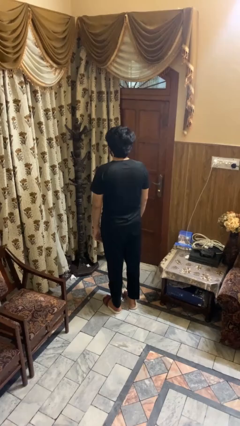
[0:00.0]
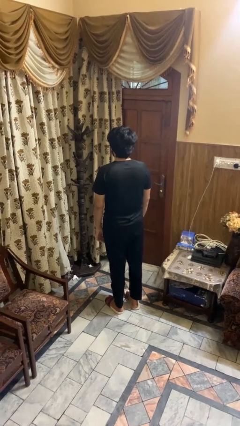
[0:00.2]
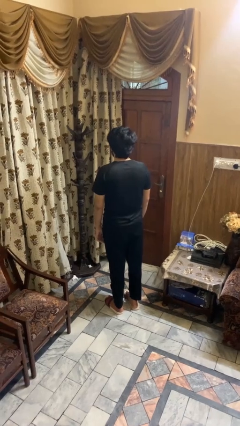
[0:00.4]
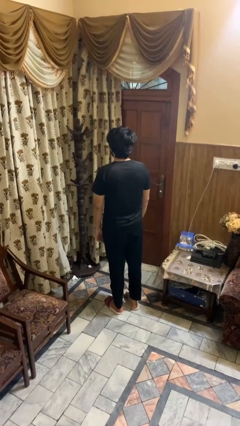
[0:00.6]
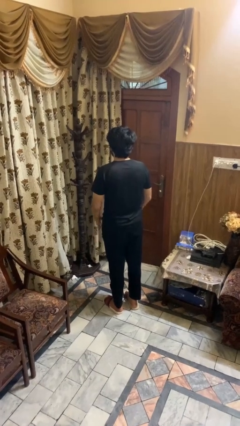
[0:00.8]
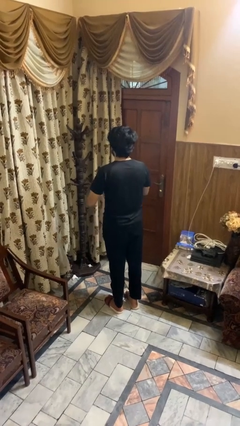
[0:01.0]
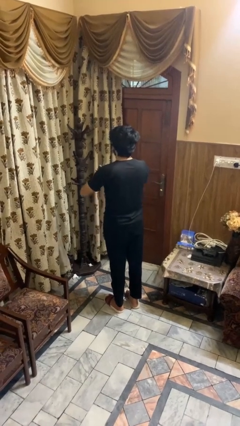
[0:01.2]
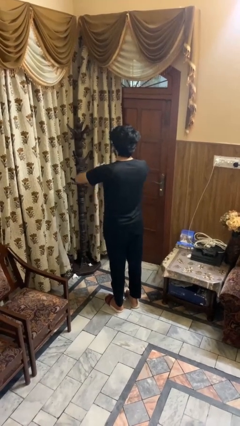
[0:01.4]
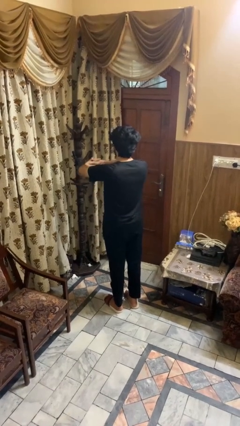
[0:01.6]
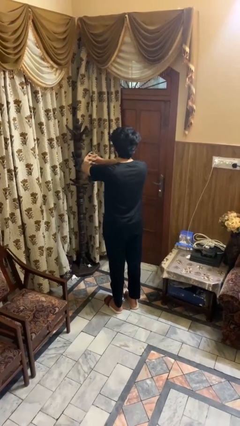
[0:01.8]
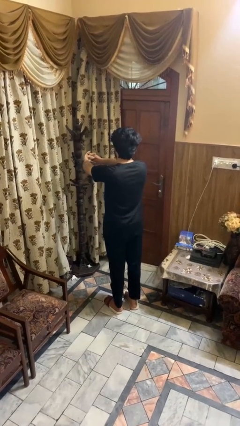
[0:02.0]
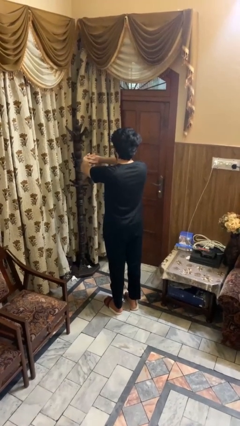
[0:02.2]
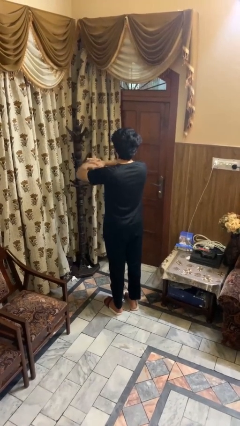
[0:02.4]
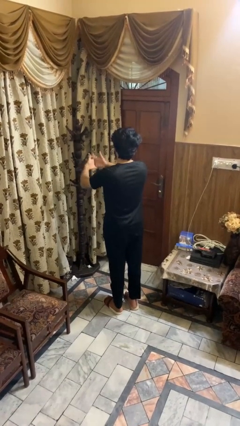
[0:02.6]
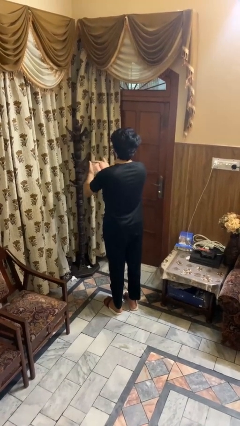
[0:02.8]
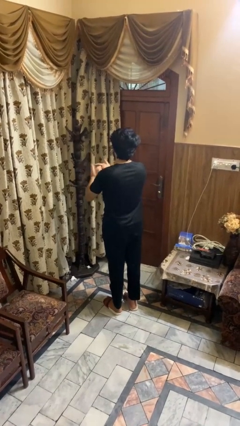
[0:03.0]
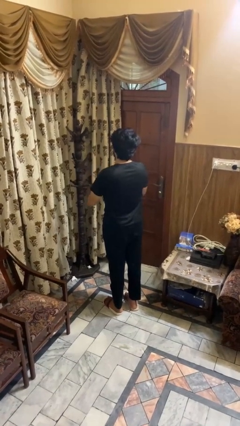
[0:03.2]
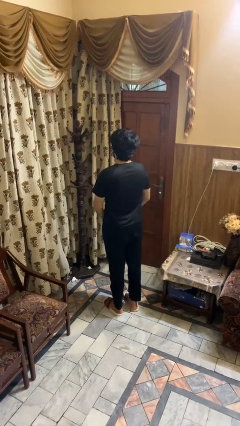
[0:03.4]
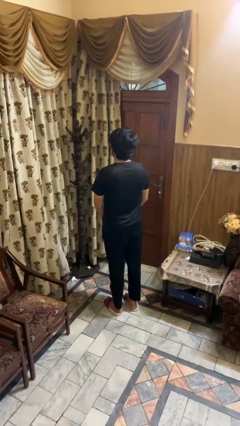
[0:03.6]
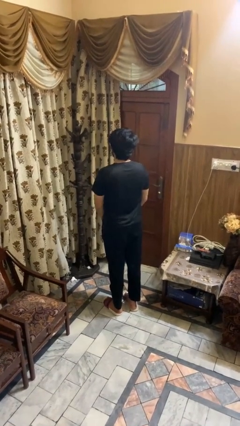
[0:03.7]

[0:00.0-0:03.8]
person cracks knuckles

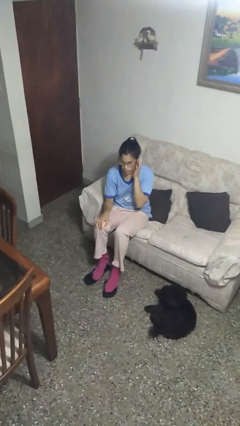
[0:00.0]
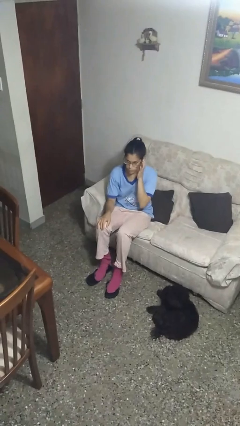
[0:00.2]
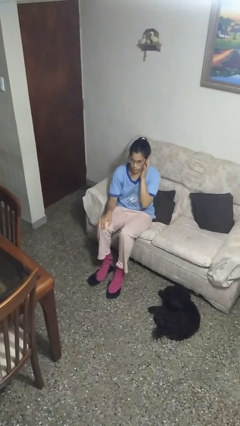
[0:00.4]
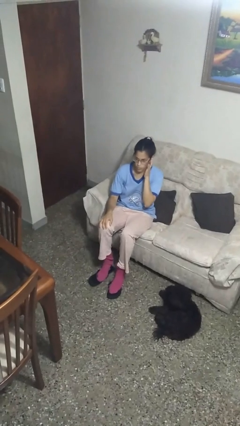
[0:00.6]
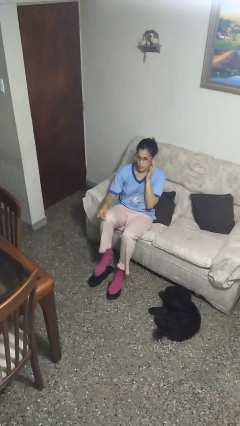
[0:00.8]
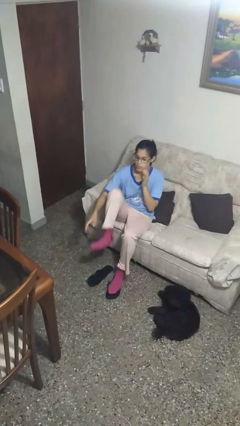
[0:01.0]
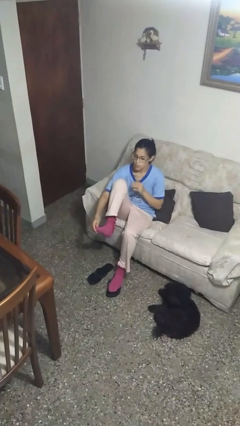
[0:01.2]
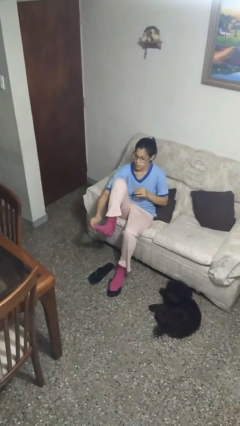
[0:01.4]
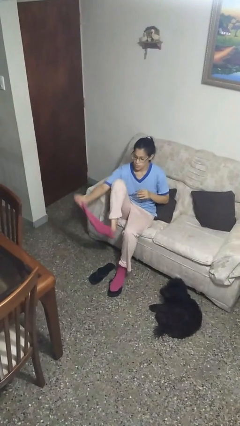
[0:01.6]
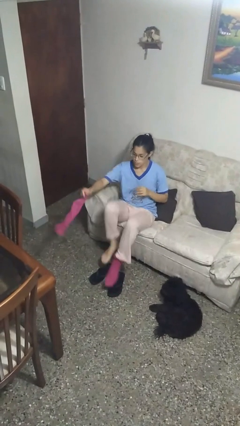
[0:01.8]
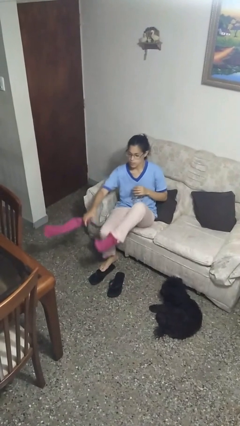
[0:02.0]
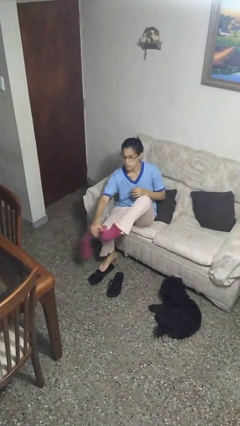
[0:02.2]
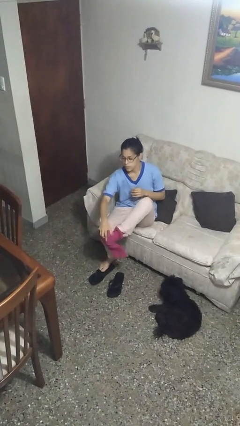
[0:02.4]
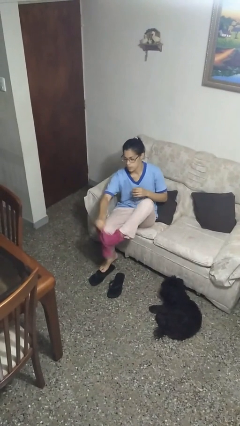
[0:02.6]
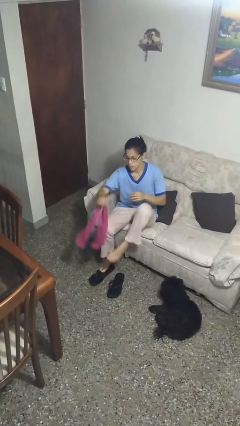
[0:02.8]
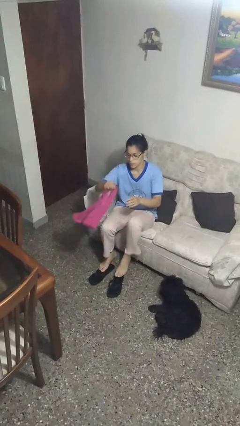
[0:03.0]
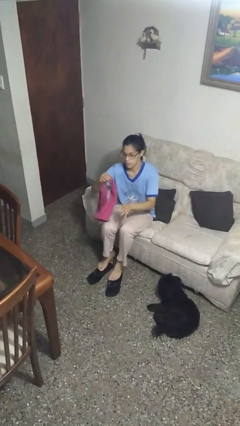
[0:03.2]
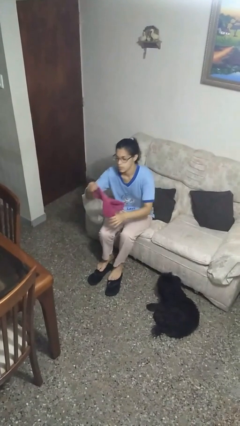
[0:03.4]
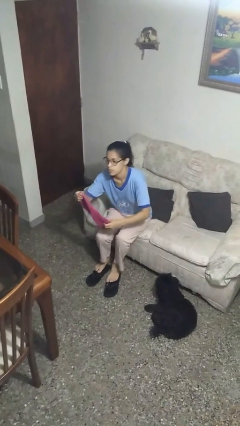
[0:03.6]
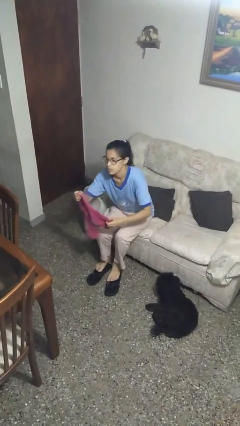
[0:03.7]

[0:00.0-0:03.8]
person takes off socks

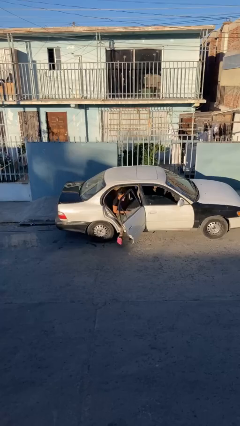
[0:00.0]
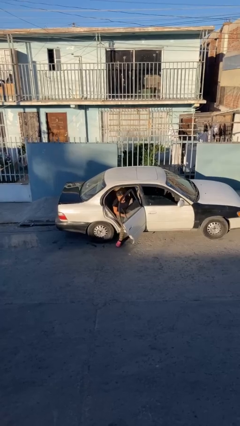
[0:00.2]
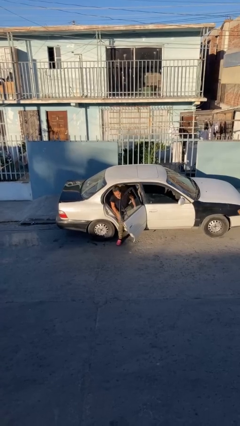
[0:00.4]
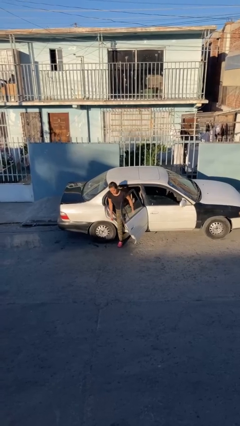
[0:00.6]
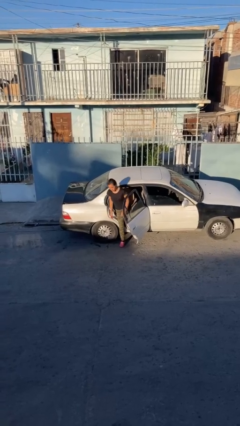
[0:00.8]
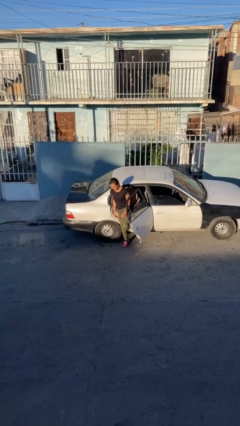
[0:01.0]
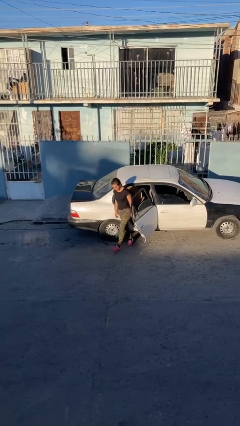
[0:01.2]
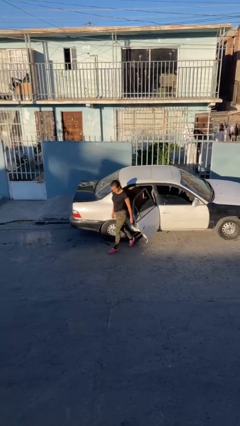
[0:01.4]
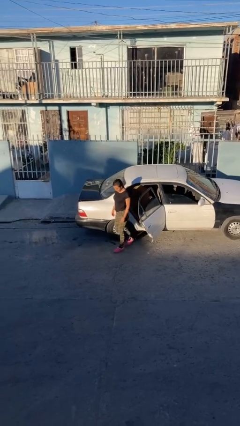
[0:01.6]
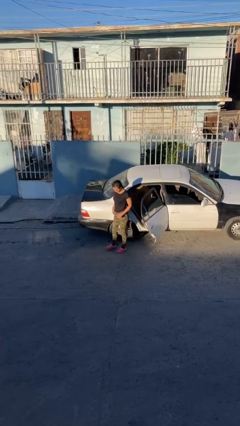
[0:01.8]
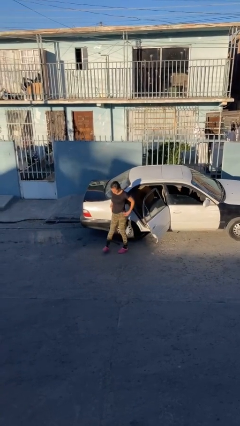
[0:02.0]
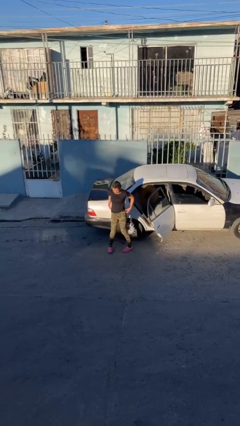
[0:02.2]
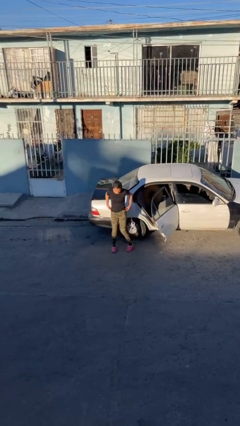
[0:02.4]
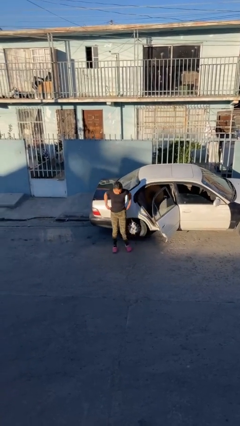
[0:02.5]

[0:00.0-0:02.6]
person exits car

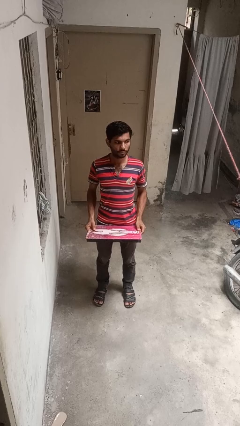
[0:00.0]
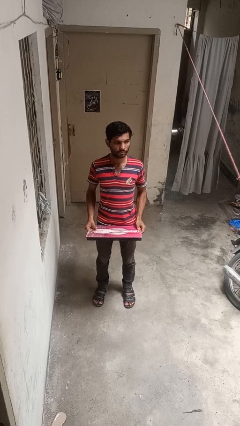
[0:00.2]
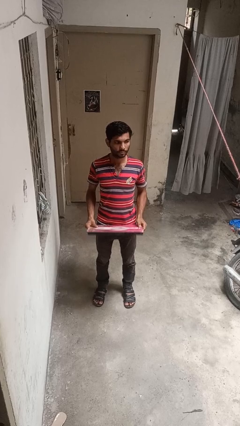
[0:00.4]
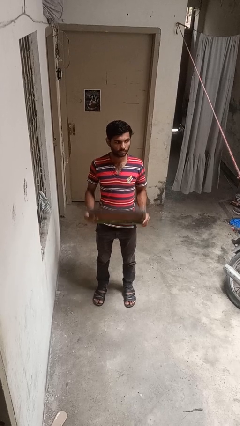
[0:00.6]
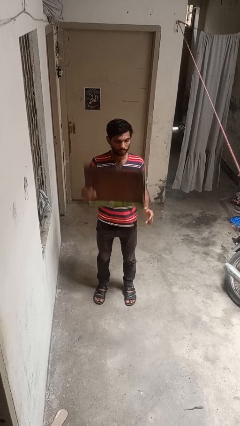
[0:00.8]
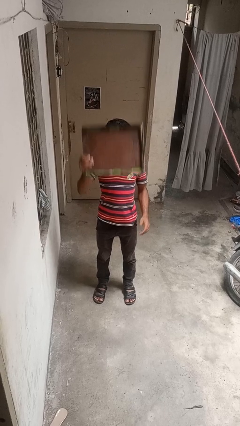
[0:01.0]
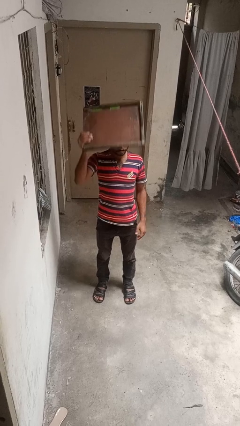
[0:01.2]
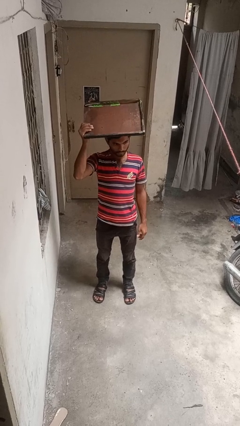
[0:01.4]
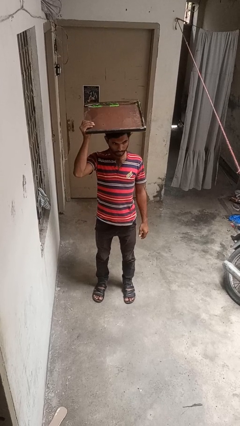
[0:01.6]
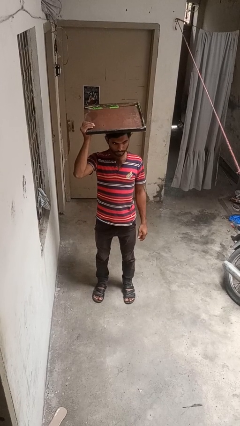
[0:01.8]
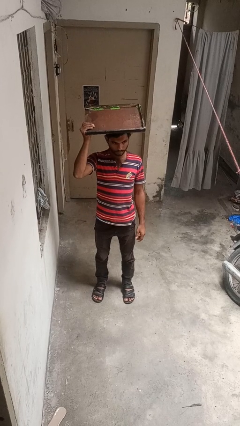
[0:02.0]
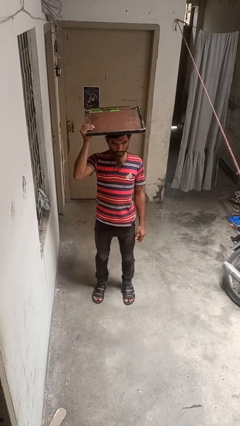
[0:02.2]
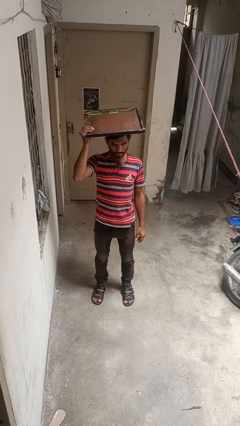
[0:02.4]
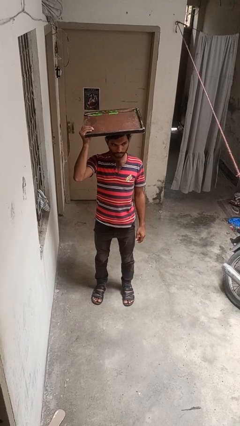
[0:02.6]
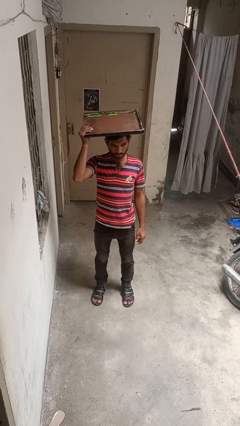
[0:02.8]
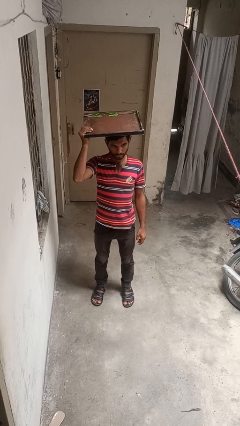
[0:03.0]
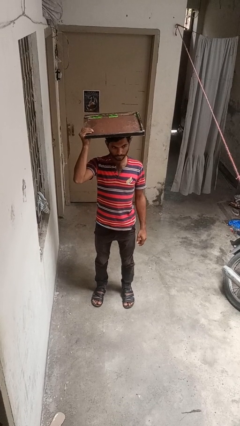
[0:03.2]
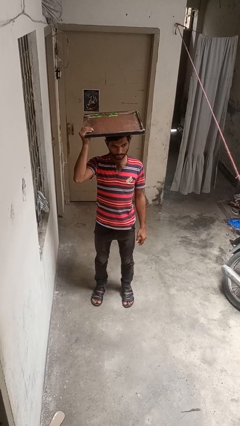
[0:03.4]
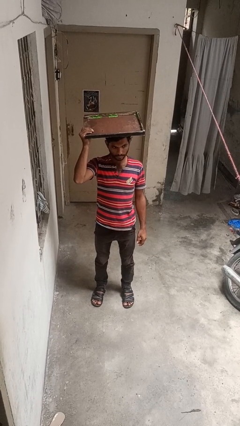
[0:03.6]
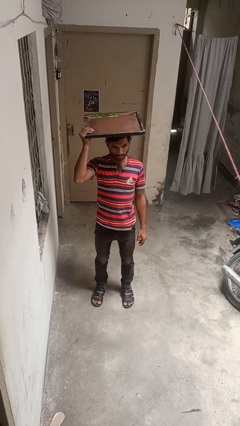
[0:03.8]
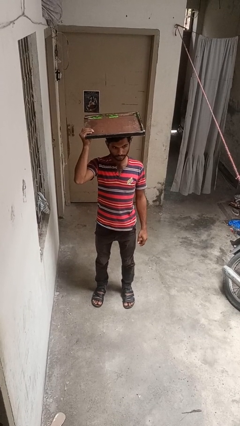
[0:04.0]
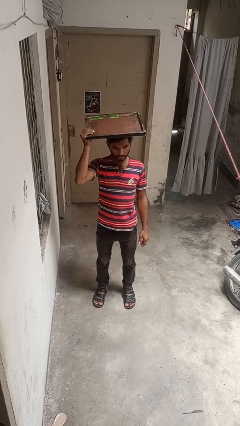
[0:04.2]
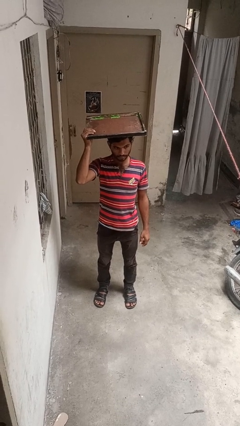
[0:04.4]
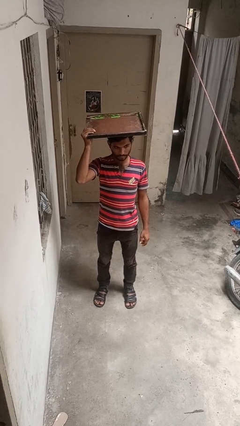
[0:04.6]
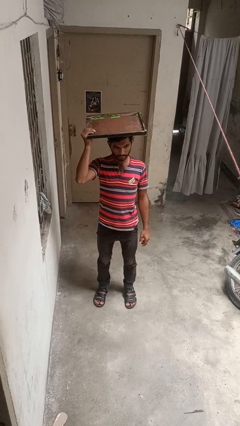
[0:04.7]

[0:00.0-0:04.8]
person holds object above head

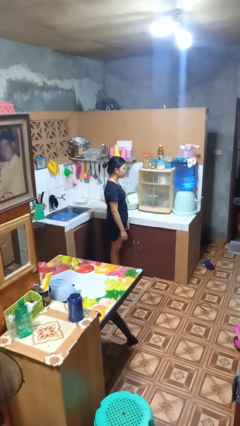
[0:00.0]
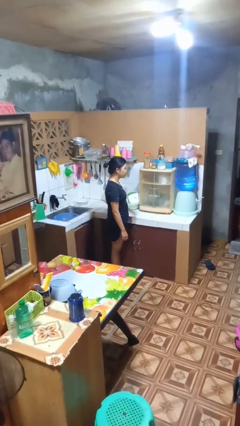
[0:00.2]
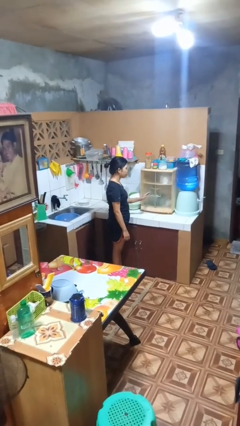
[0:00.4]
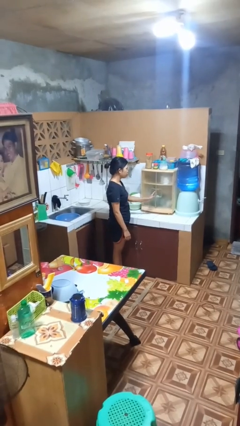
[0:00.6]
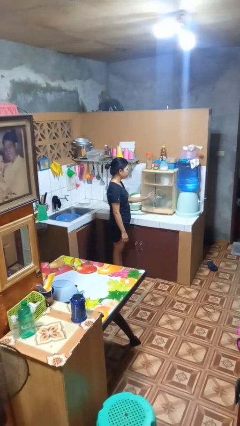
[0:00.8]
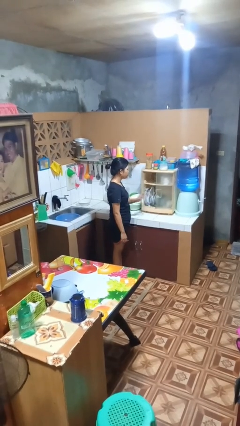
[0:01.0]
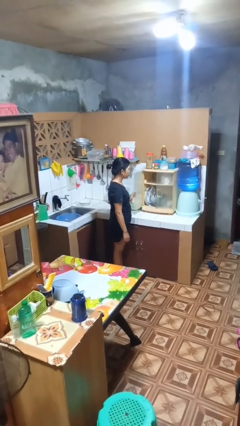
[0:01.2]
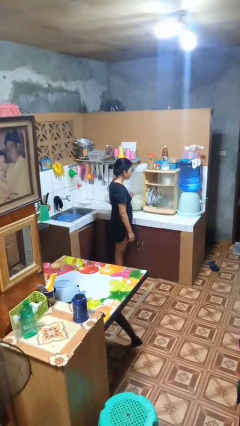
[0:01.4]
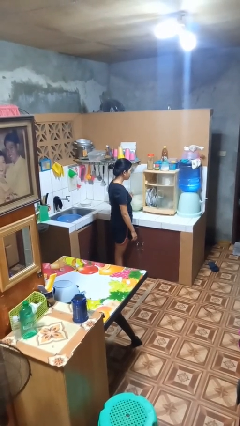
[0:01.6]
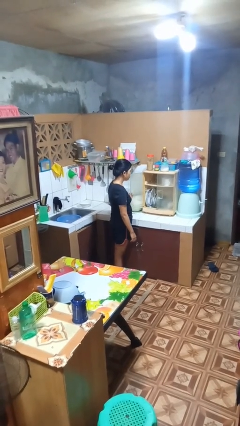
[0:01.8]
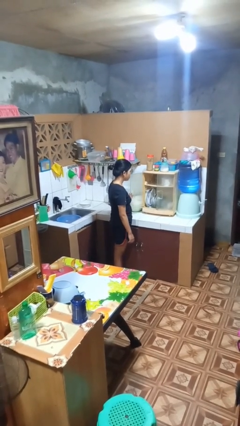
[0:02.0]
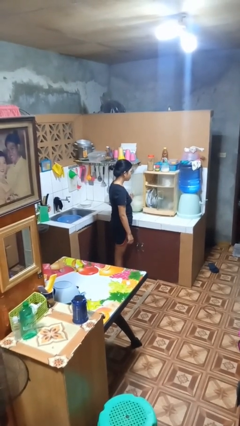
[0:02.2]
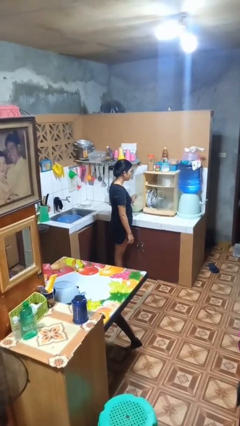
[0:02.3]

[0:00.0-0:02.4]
person opens kitchen drawer
